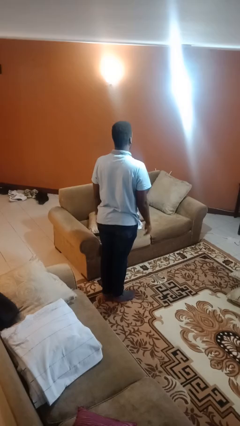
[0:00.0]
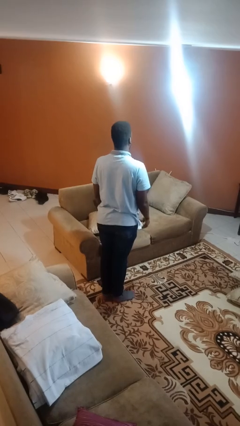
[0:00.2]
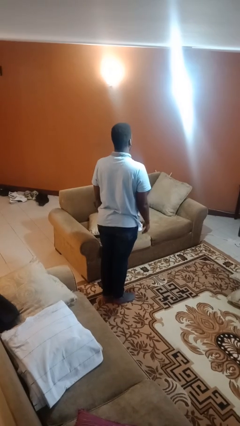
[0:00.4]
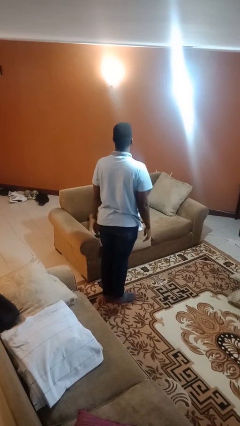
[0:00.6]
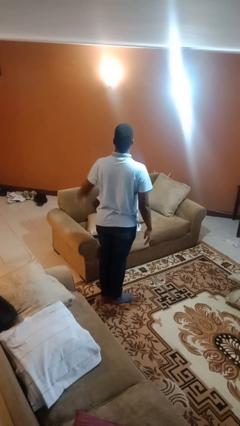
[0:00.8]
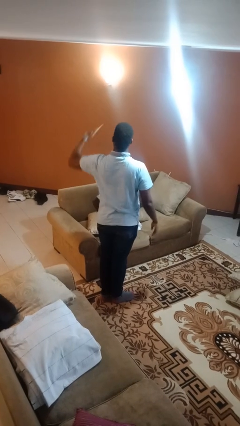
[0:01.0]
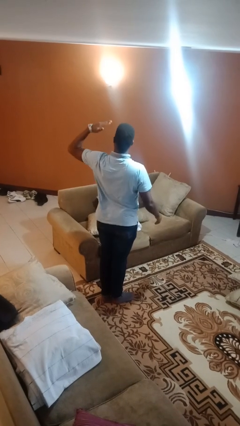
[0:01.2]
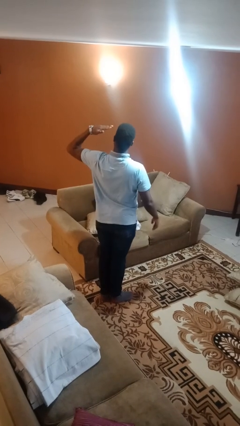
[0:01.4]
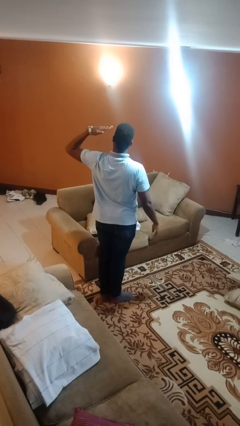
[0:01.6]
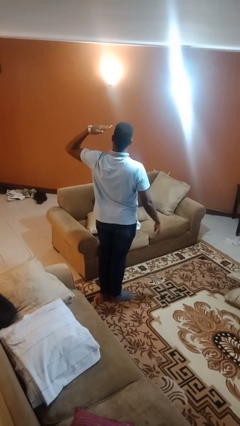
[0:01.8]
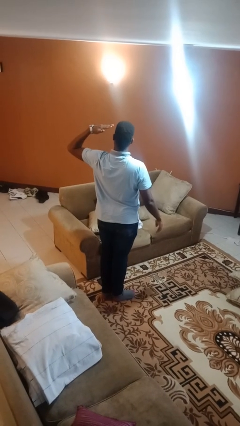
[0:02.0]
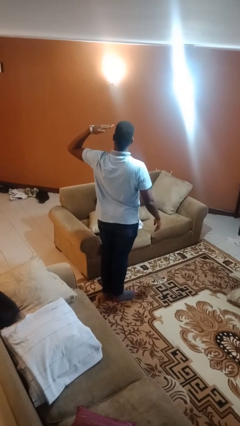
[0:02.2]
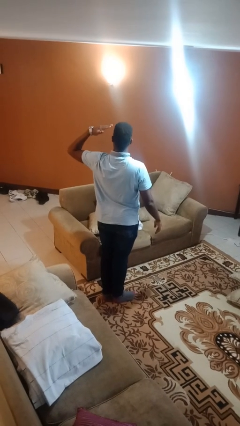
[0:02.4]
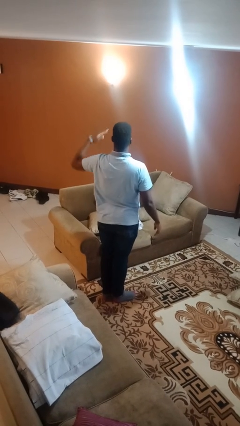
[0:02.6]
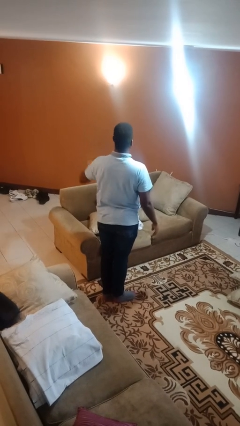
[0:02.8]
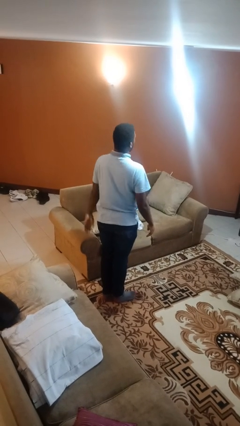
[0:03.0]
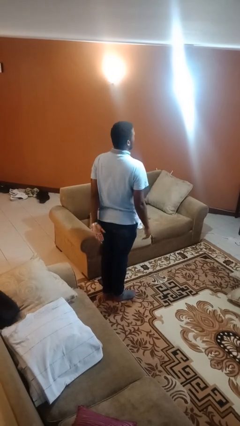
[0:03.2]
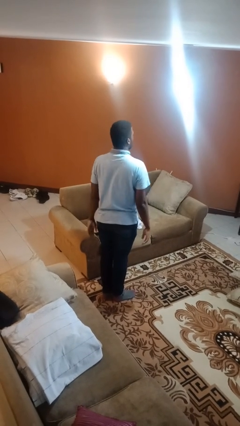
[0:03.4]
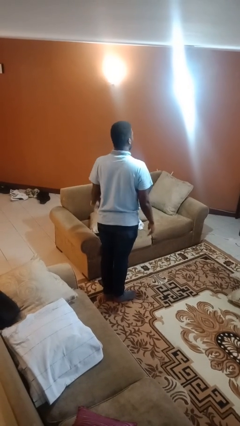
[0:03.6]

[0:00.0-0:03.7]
person salutes

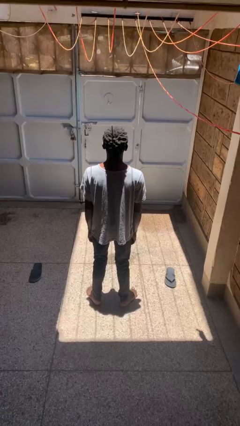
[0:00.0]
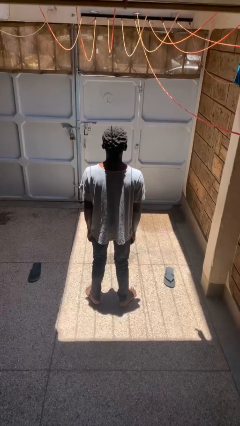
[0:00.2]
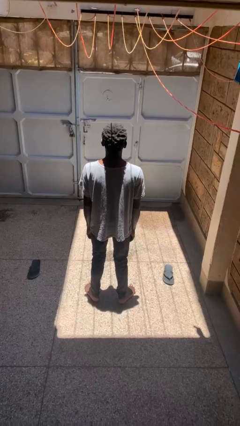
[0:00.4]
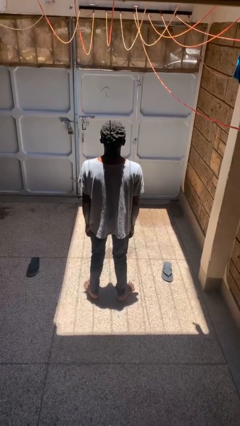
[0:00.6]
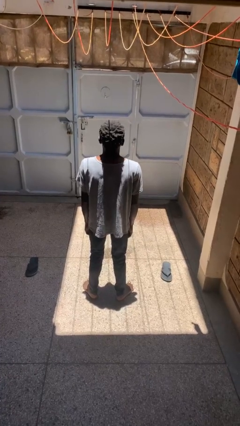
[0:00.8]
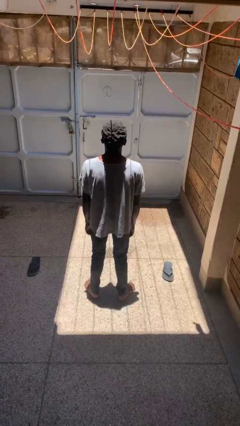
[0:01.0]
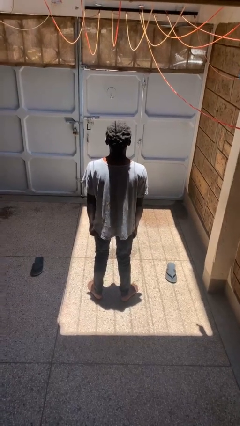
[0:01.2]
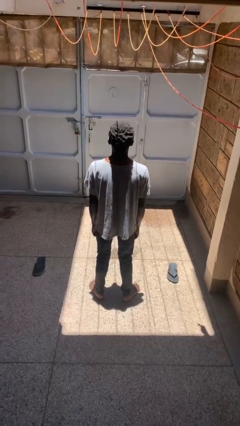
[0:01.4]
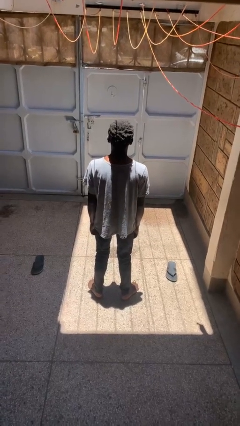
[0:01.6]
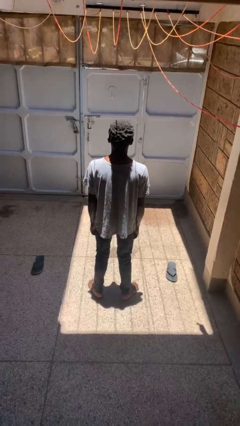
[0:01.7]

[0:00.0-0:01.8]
person shrugs

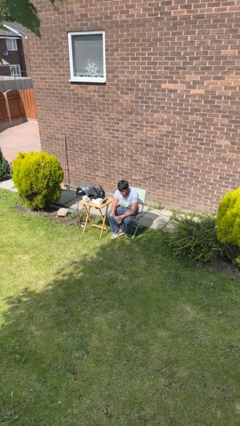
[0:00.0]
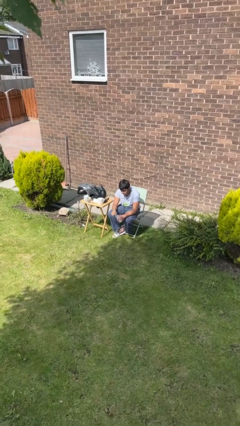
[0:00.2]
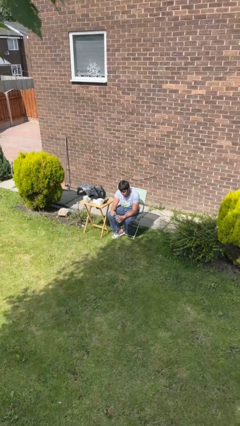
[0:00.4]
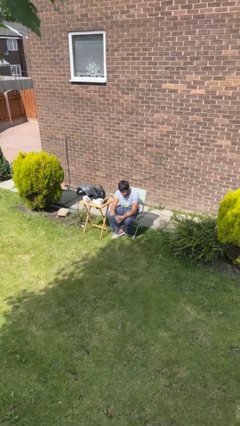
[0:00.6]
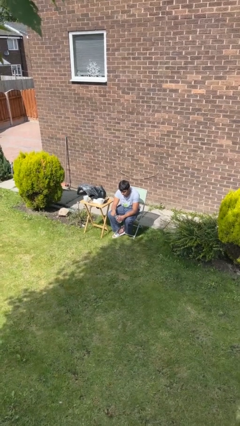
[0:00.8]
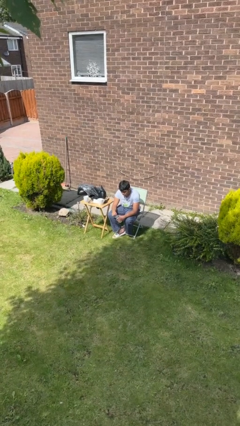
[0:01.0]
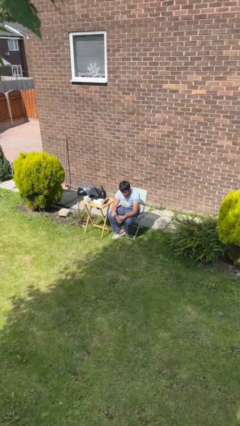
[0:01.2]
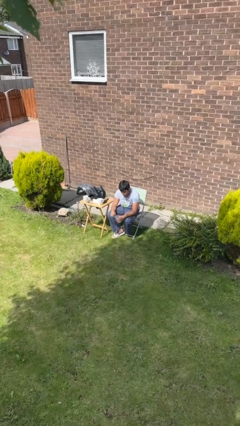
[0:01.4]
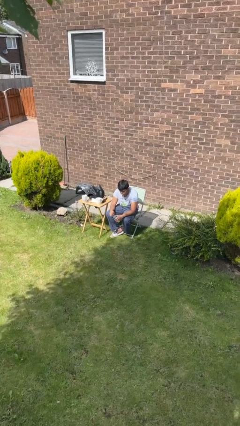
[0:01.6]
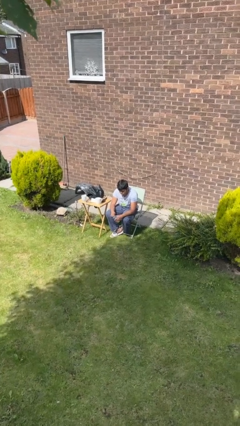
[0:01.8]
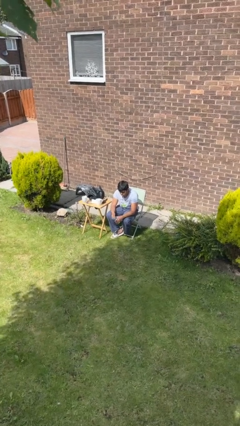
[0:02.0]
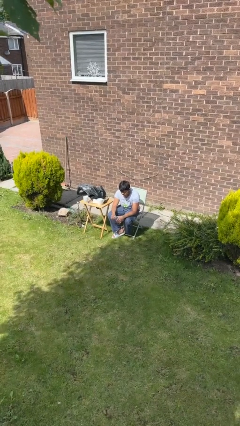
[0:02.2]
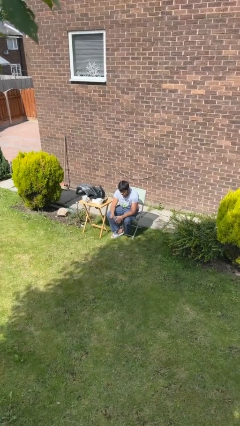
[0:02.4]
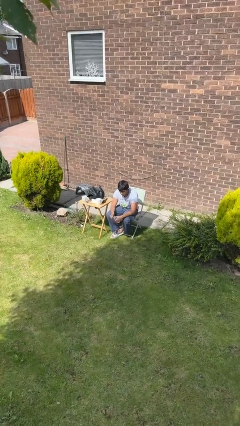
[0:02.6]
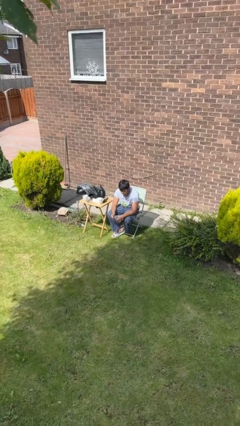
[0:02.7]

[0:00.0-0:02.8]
person unscrews lid from bottle

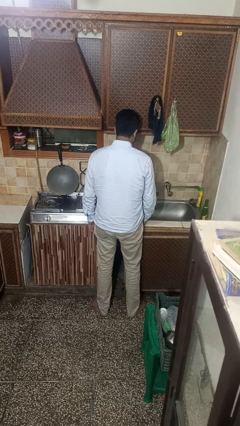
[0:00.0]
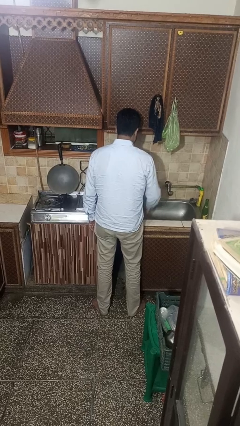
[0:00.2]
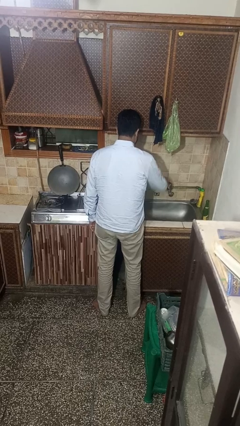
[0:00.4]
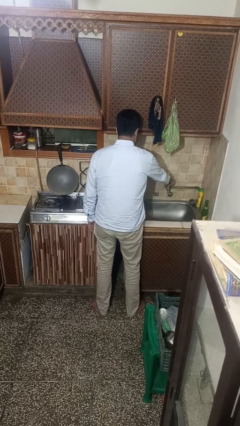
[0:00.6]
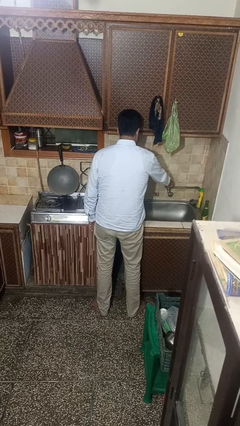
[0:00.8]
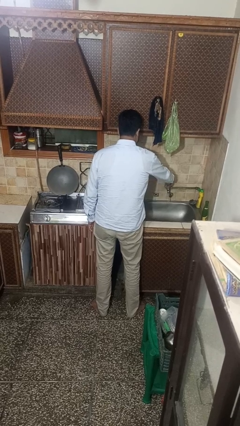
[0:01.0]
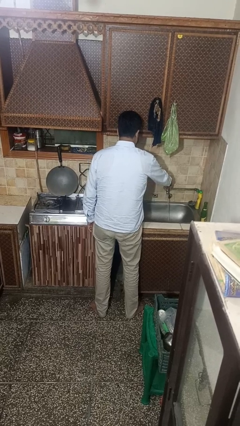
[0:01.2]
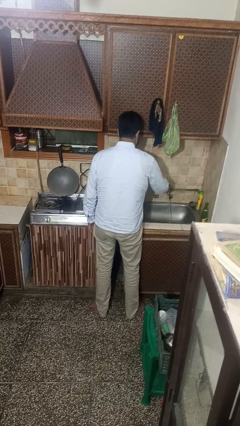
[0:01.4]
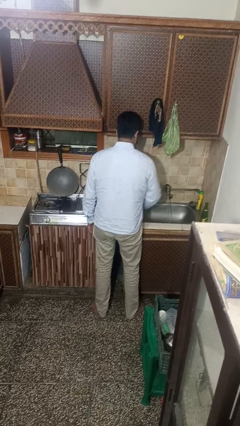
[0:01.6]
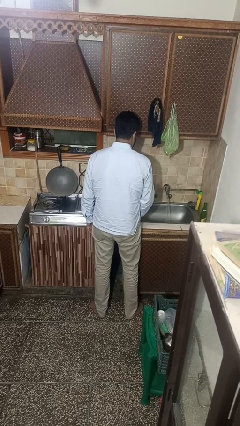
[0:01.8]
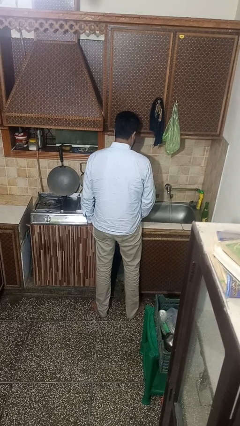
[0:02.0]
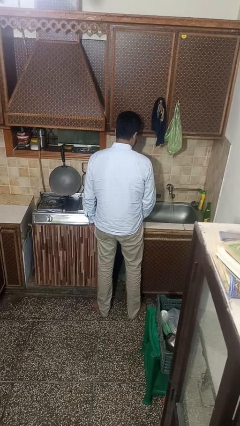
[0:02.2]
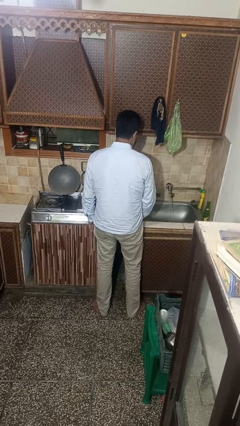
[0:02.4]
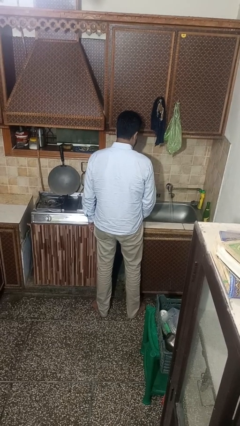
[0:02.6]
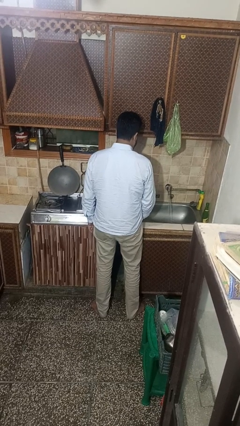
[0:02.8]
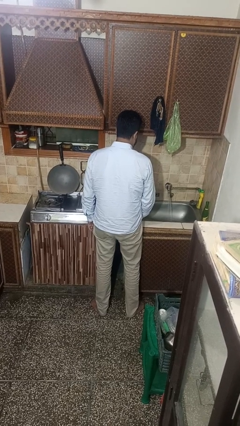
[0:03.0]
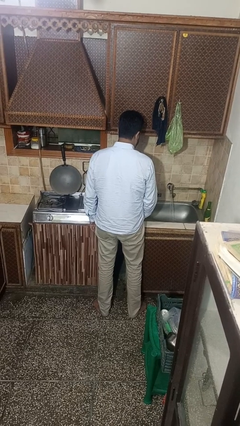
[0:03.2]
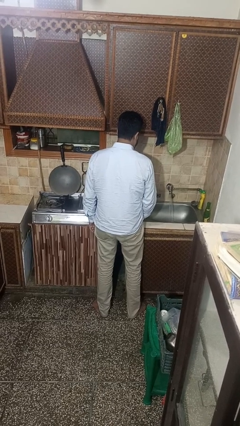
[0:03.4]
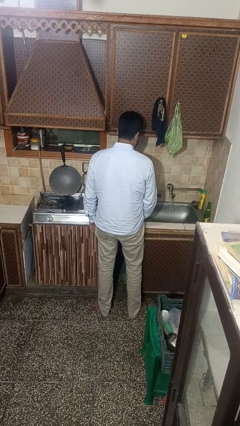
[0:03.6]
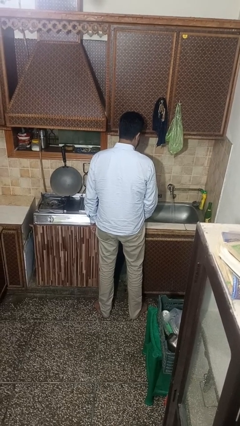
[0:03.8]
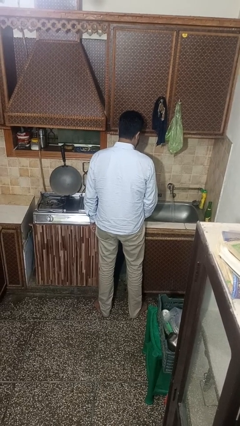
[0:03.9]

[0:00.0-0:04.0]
person turns on faucet

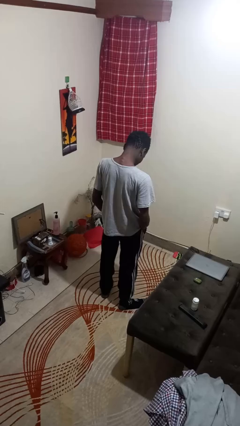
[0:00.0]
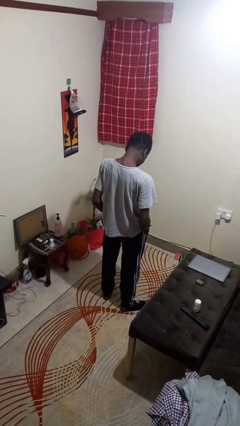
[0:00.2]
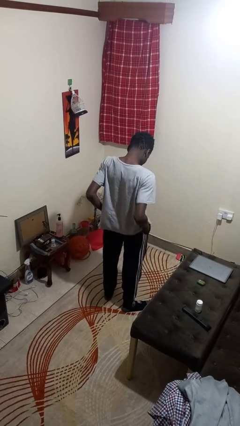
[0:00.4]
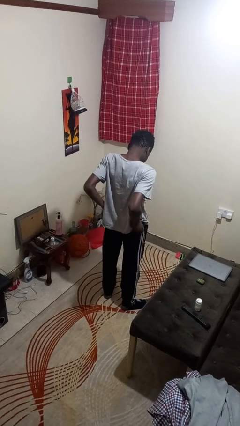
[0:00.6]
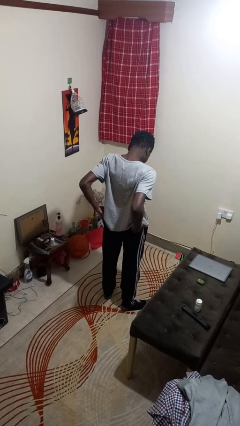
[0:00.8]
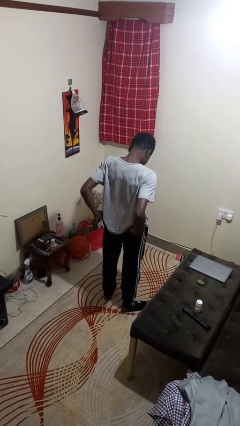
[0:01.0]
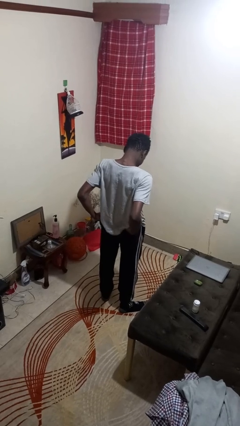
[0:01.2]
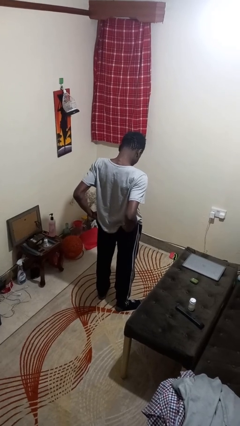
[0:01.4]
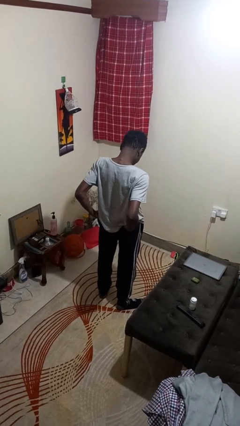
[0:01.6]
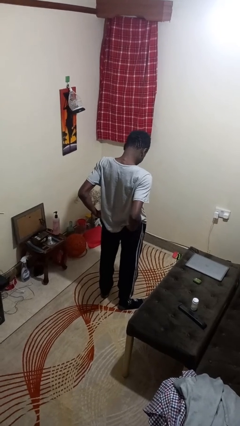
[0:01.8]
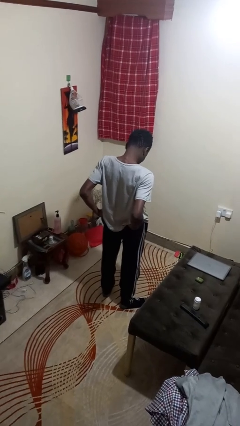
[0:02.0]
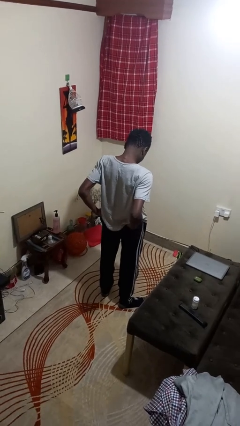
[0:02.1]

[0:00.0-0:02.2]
person puts hands in back pockets

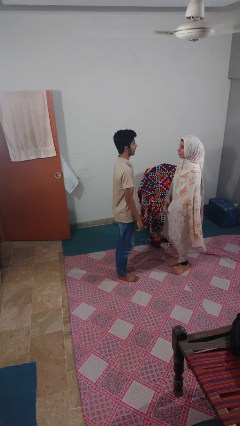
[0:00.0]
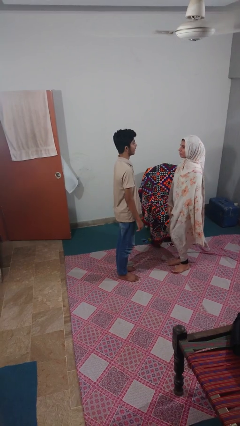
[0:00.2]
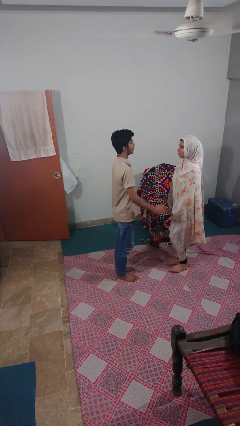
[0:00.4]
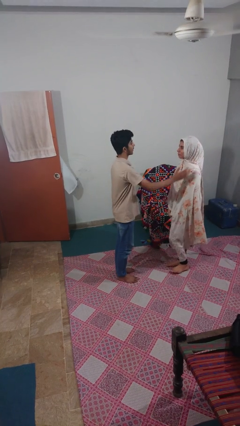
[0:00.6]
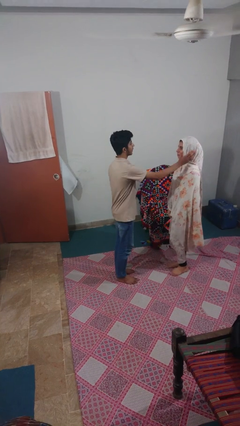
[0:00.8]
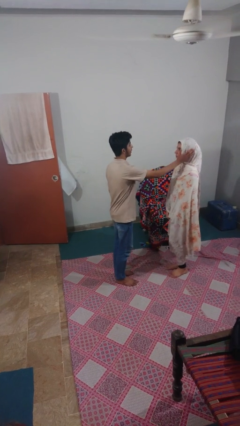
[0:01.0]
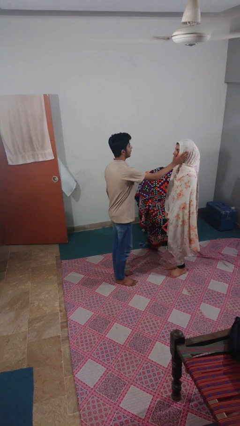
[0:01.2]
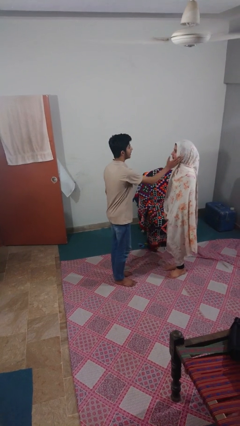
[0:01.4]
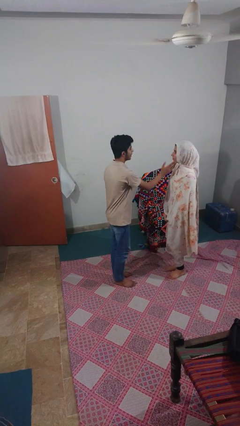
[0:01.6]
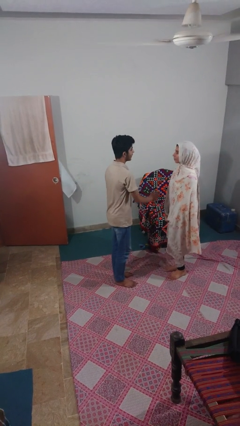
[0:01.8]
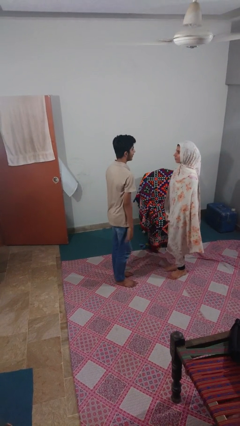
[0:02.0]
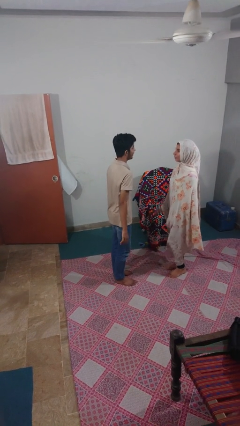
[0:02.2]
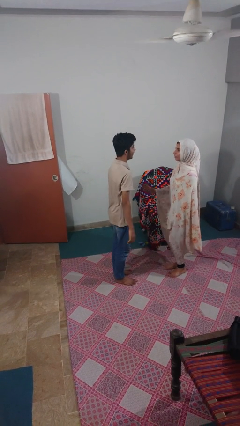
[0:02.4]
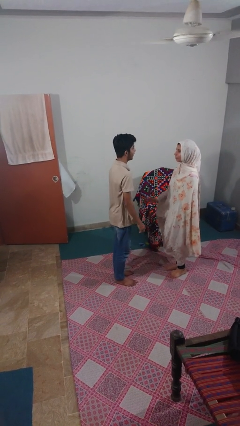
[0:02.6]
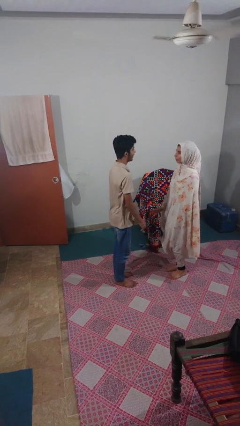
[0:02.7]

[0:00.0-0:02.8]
person touches face of person

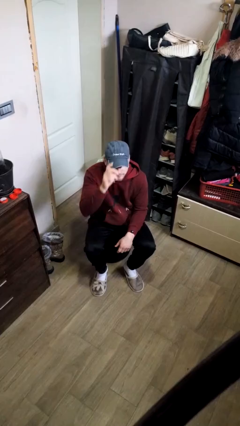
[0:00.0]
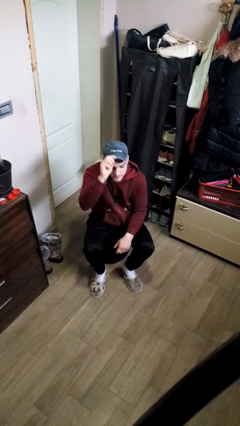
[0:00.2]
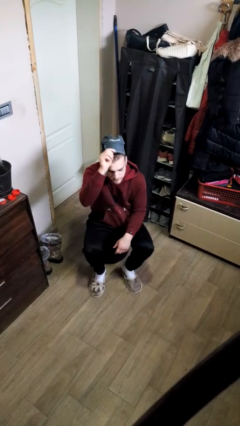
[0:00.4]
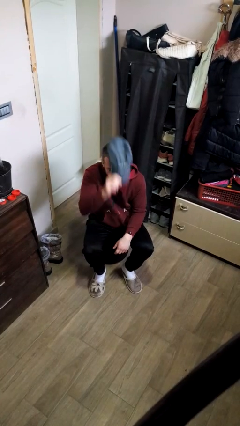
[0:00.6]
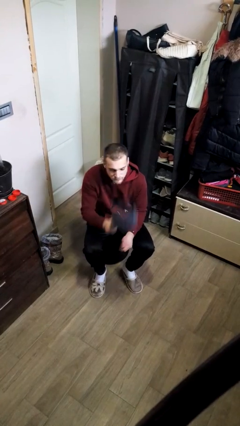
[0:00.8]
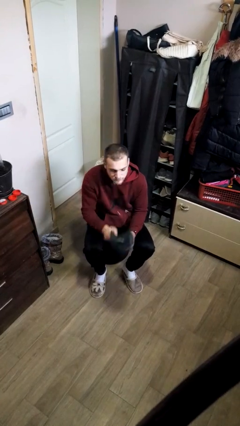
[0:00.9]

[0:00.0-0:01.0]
person takes off hat
